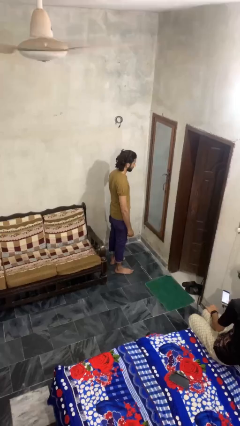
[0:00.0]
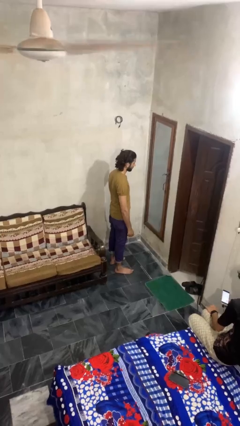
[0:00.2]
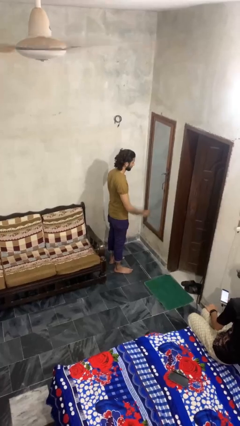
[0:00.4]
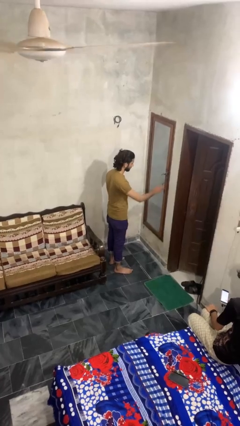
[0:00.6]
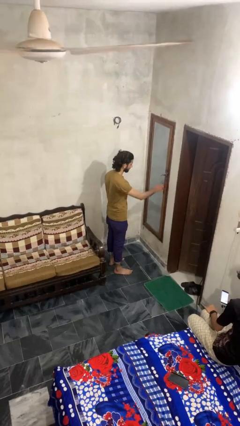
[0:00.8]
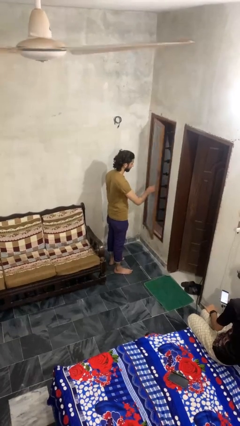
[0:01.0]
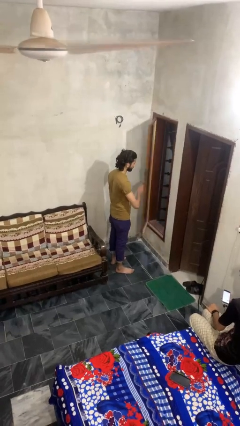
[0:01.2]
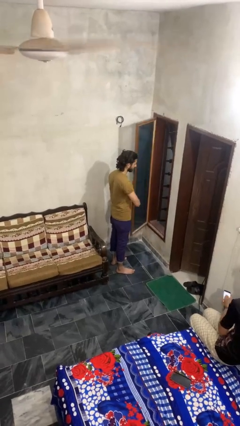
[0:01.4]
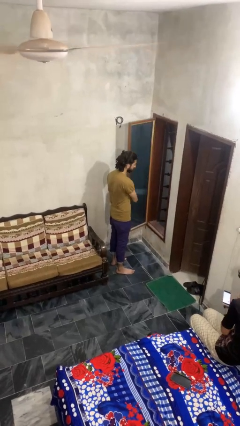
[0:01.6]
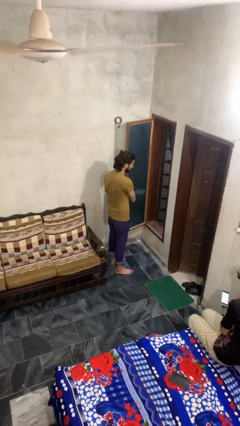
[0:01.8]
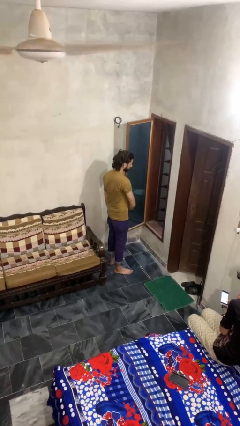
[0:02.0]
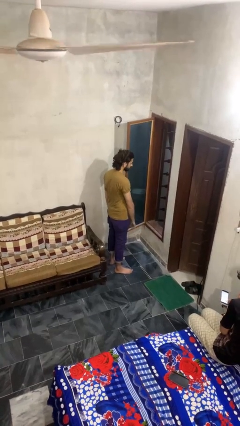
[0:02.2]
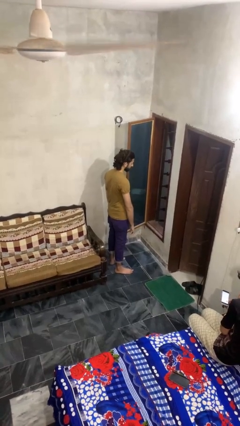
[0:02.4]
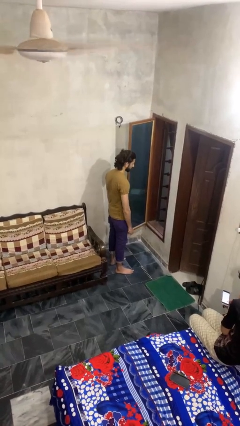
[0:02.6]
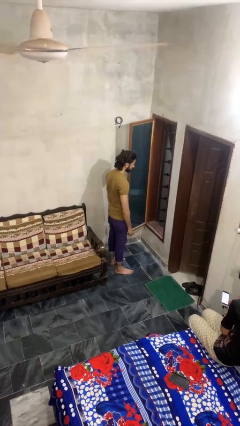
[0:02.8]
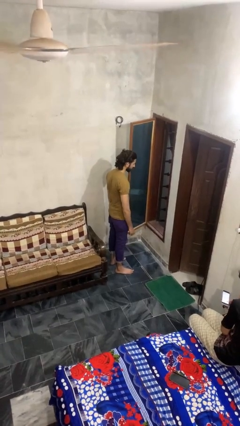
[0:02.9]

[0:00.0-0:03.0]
person opens home window

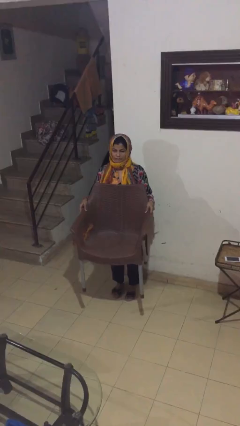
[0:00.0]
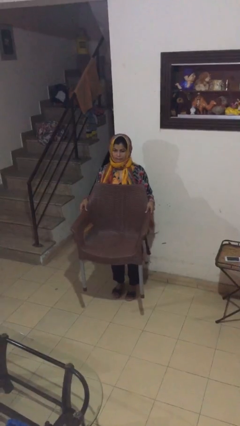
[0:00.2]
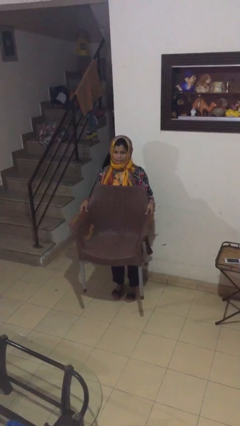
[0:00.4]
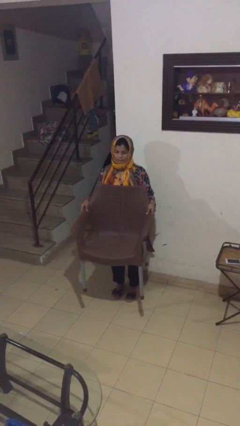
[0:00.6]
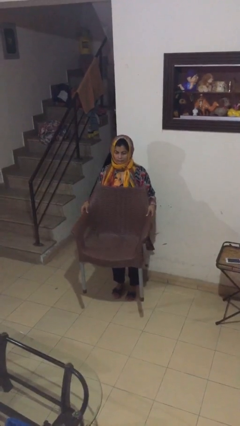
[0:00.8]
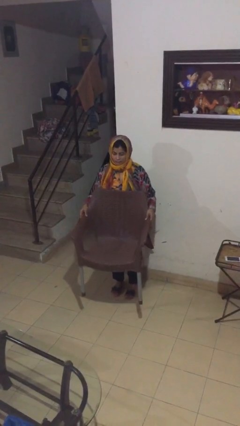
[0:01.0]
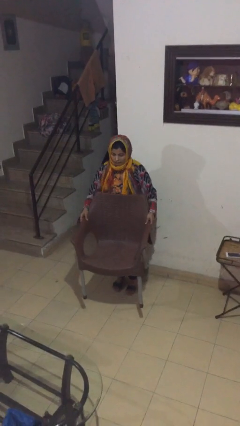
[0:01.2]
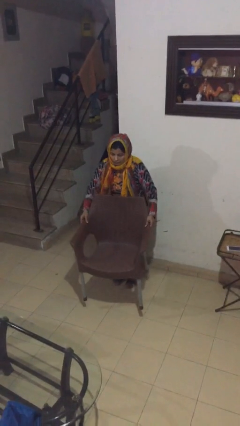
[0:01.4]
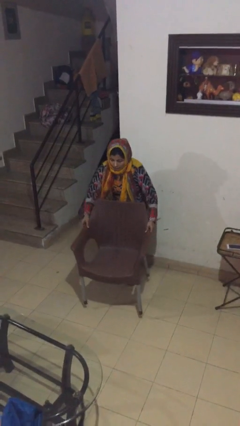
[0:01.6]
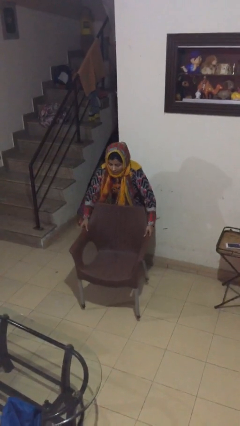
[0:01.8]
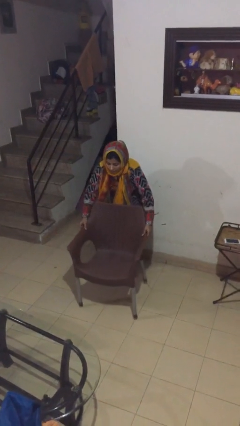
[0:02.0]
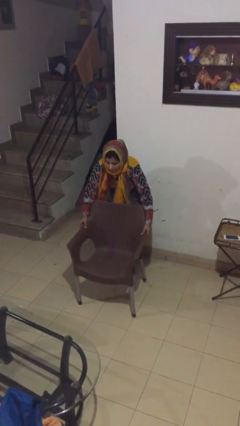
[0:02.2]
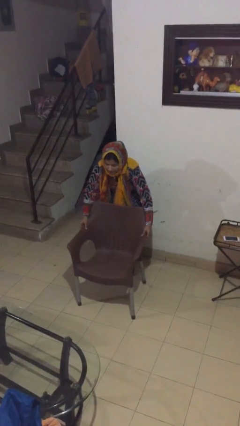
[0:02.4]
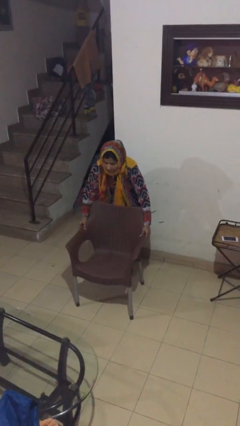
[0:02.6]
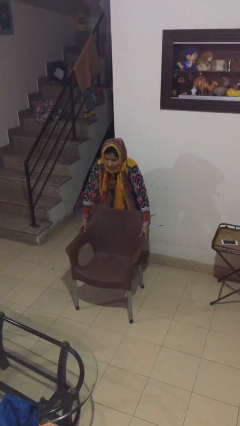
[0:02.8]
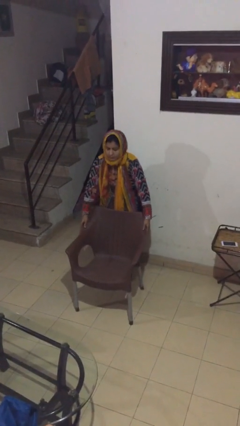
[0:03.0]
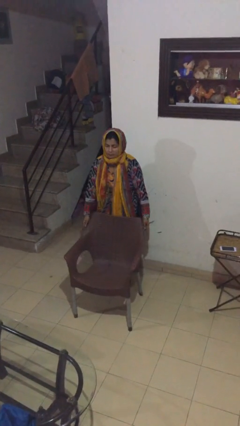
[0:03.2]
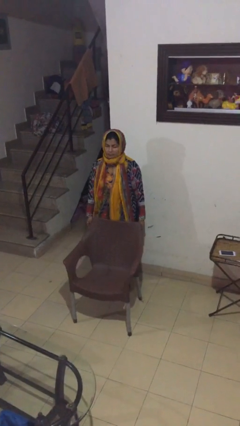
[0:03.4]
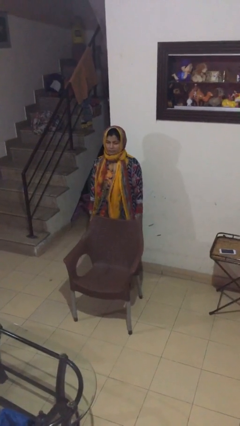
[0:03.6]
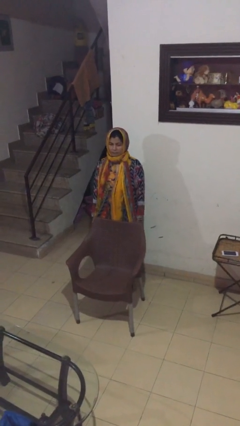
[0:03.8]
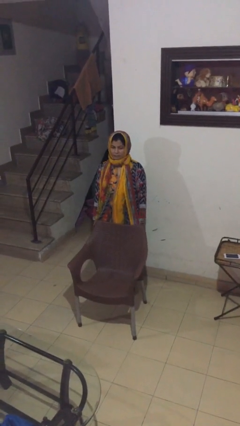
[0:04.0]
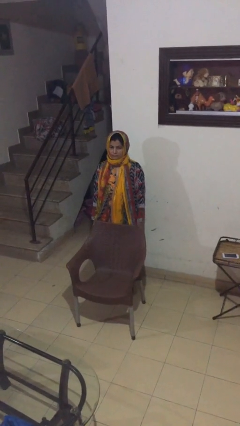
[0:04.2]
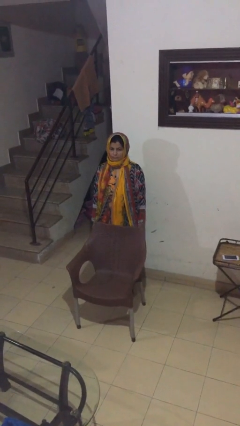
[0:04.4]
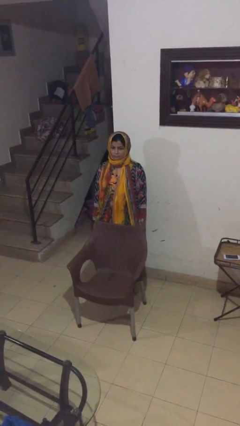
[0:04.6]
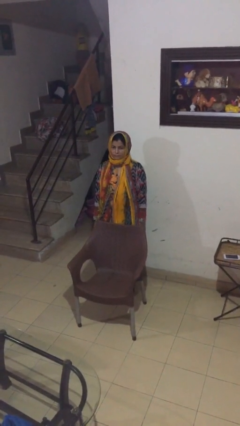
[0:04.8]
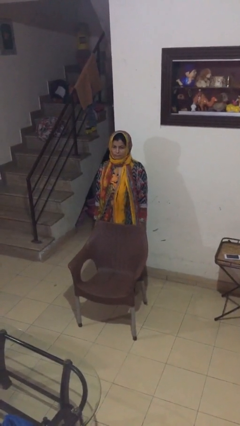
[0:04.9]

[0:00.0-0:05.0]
person puts down object on floor

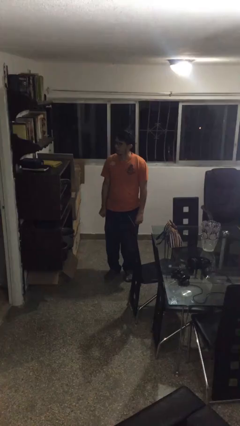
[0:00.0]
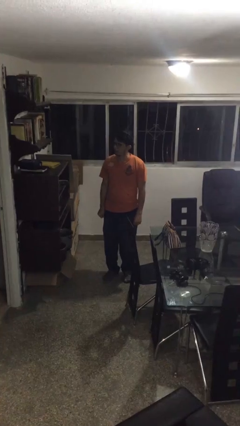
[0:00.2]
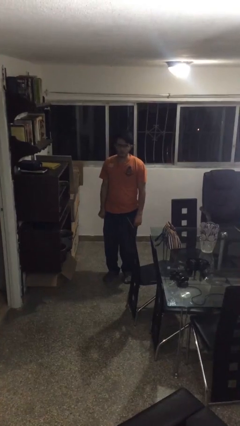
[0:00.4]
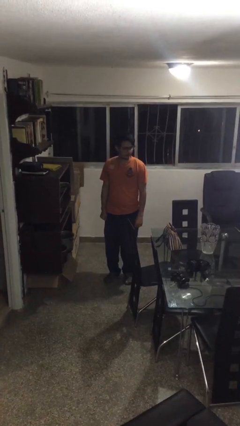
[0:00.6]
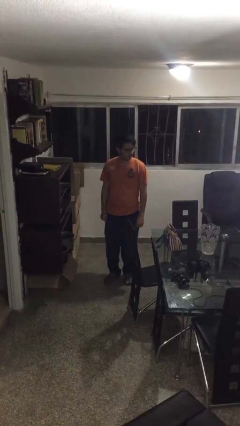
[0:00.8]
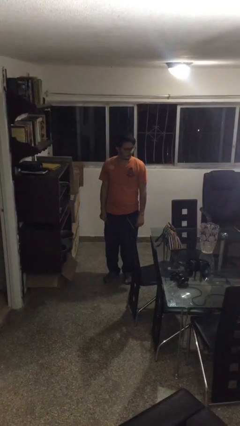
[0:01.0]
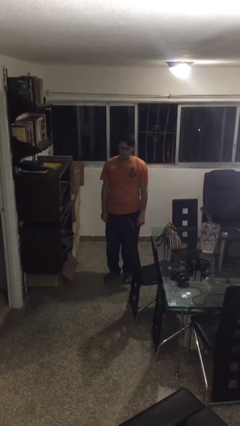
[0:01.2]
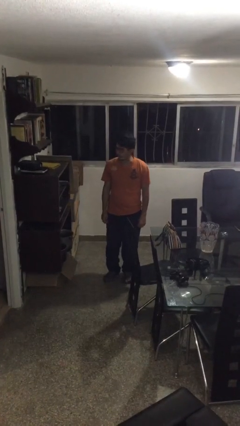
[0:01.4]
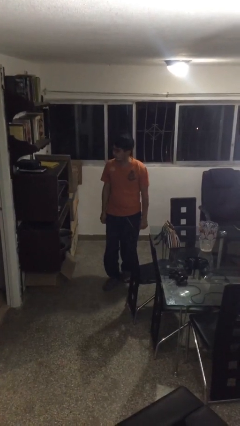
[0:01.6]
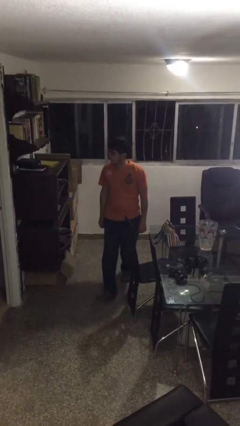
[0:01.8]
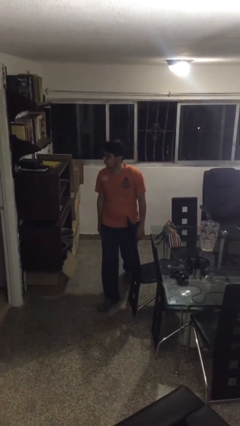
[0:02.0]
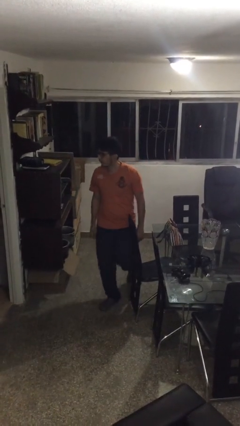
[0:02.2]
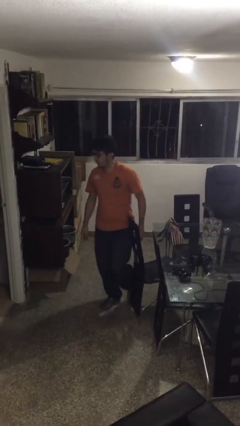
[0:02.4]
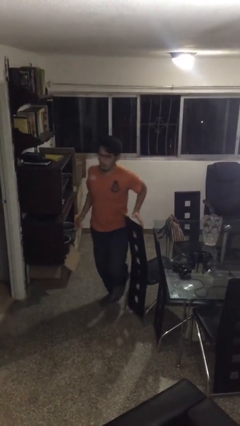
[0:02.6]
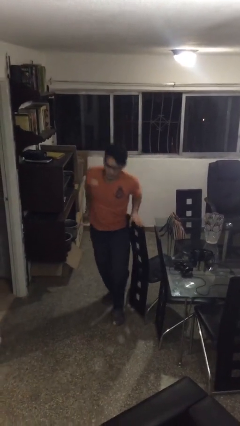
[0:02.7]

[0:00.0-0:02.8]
person trips on object on floor

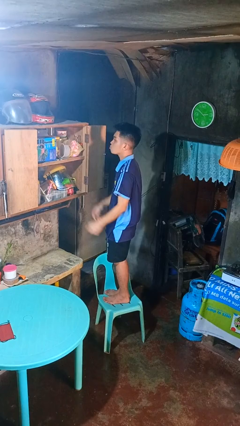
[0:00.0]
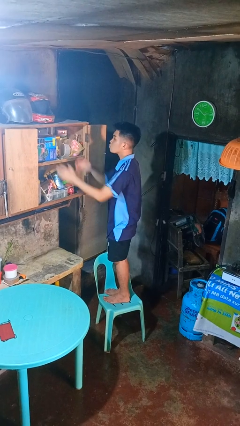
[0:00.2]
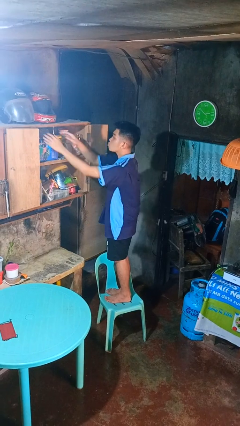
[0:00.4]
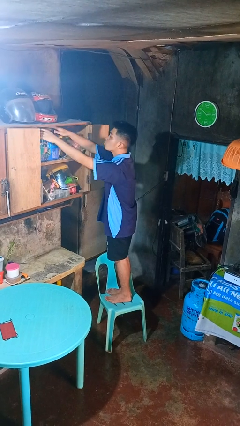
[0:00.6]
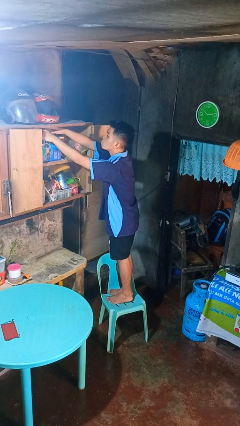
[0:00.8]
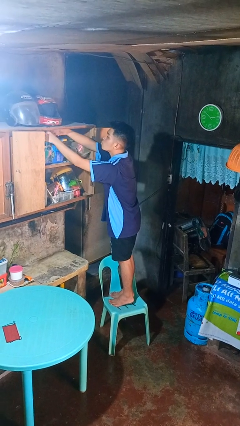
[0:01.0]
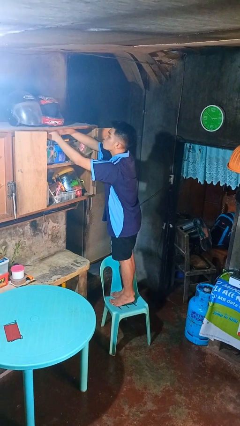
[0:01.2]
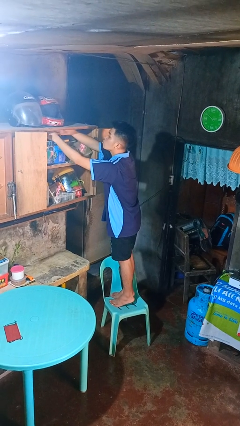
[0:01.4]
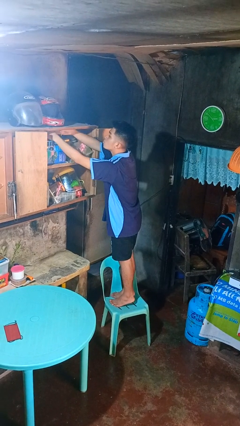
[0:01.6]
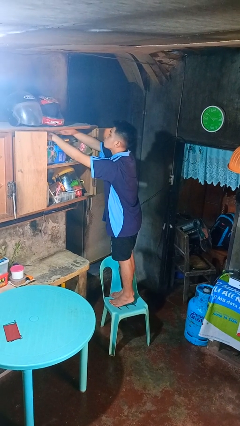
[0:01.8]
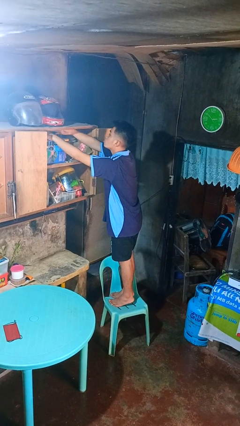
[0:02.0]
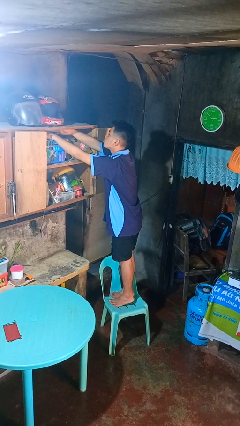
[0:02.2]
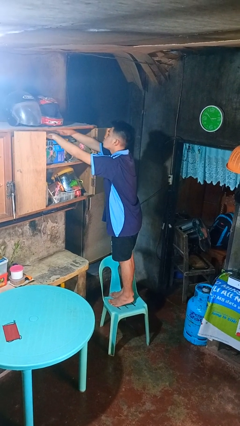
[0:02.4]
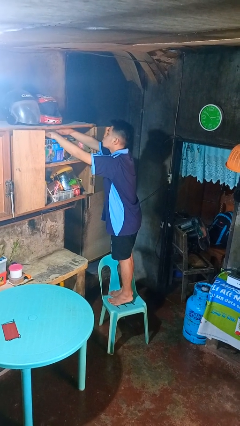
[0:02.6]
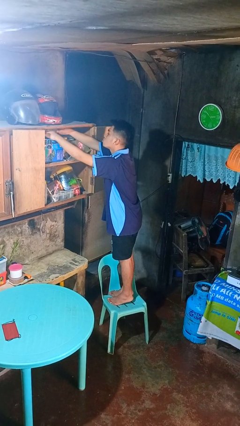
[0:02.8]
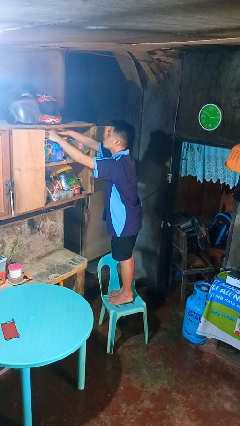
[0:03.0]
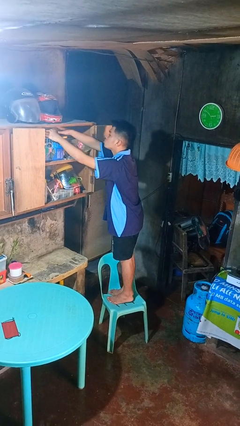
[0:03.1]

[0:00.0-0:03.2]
person searches in cabinet

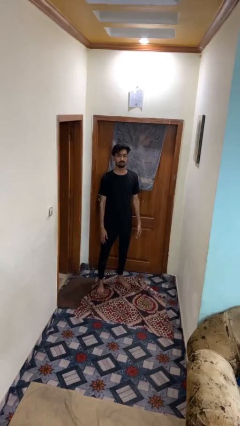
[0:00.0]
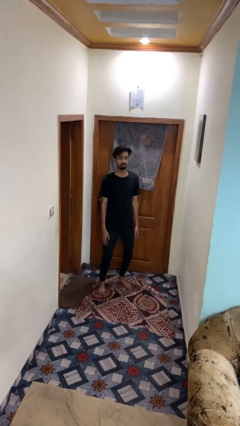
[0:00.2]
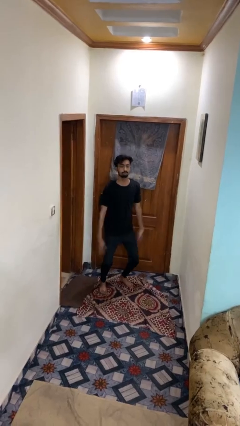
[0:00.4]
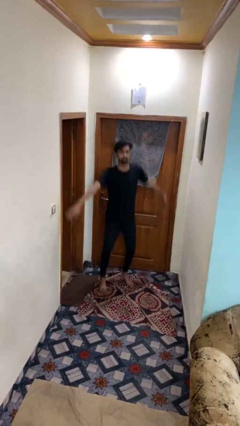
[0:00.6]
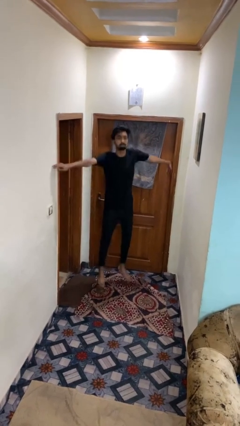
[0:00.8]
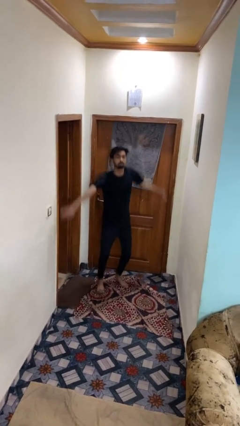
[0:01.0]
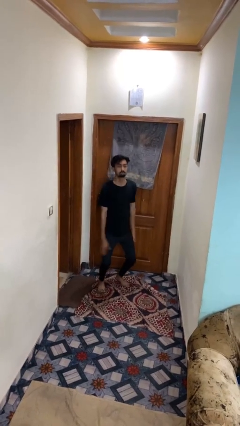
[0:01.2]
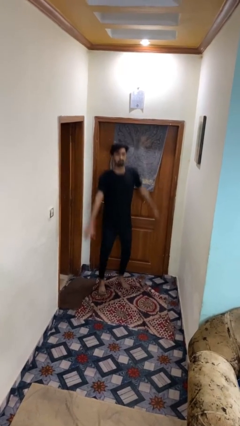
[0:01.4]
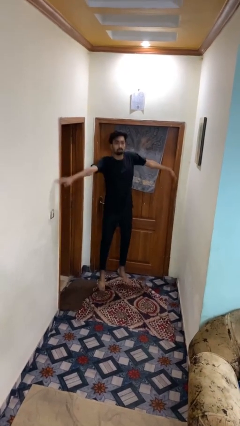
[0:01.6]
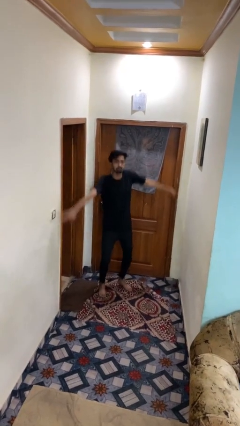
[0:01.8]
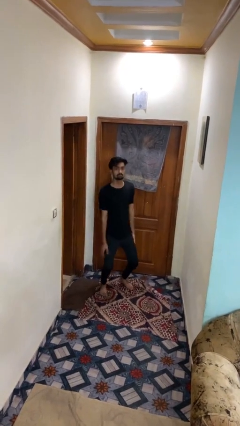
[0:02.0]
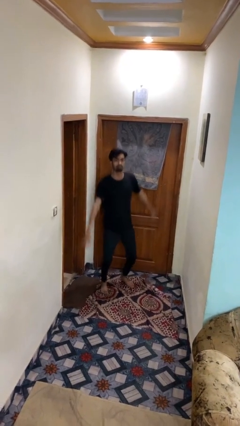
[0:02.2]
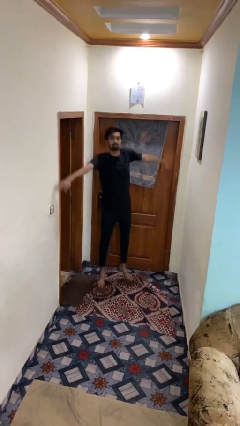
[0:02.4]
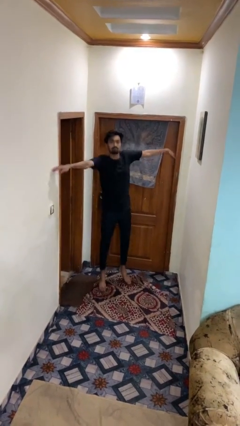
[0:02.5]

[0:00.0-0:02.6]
person exercises with jumping jacks

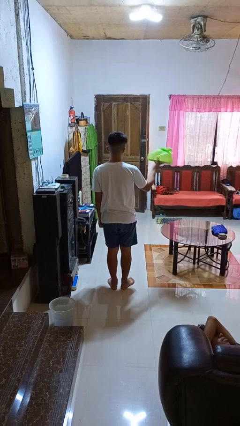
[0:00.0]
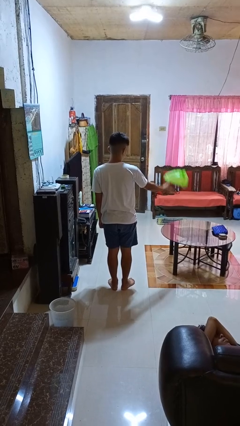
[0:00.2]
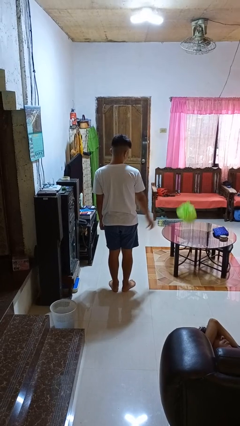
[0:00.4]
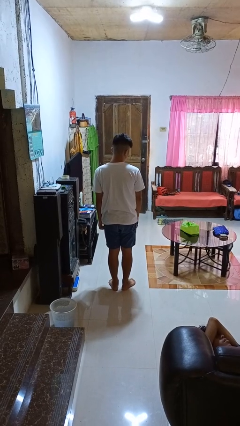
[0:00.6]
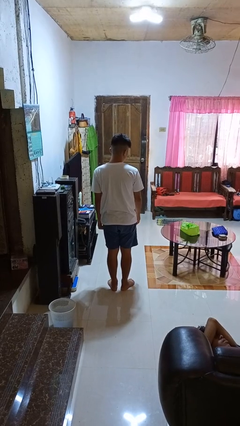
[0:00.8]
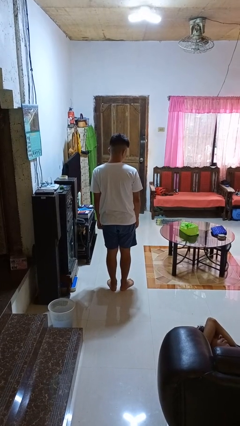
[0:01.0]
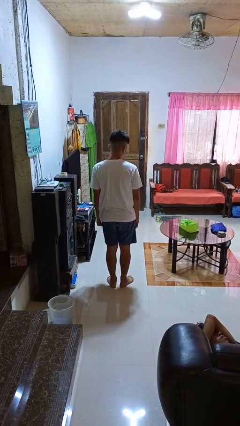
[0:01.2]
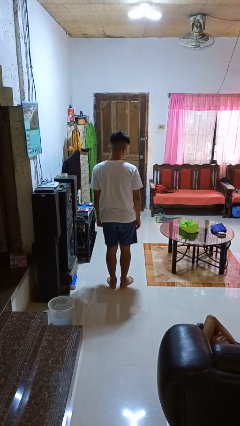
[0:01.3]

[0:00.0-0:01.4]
person throws object on table
